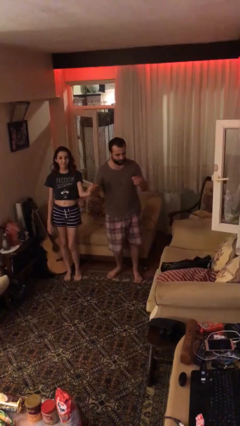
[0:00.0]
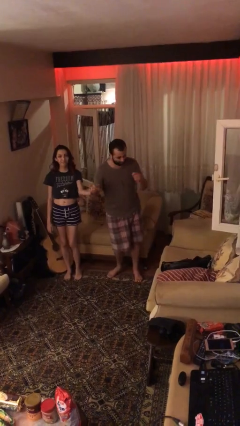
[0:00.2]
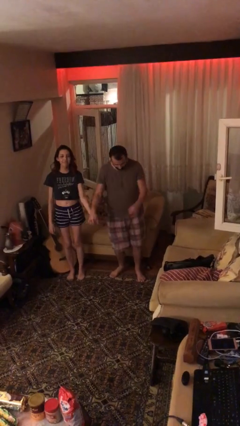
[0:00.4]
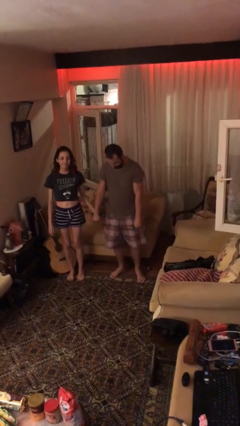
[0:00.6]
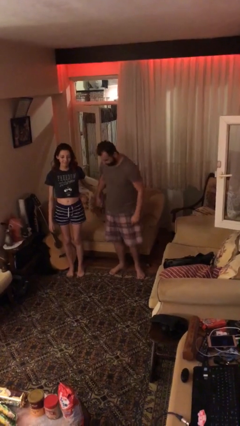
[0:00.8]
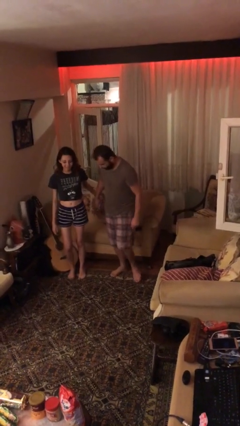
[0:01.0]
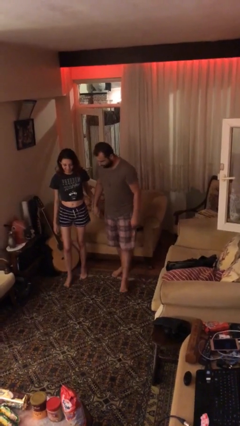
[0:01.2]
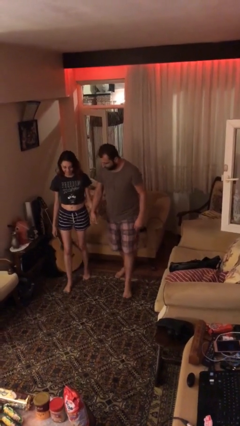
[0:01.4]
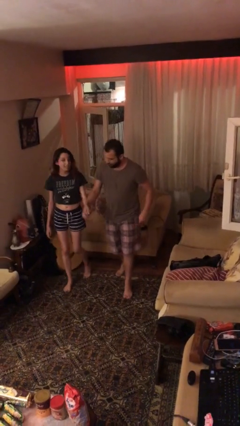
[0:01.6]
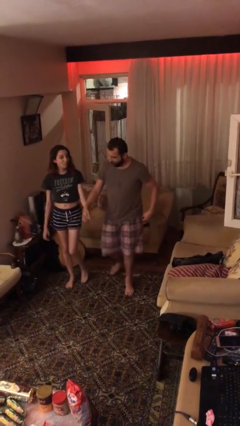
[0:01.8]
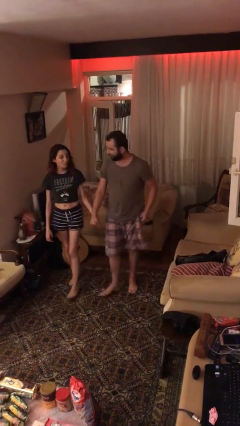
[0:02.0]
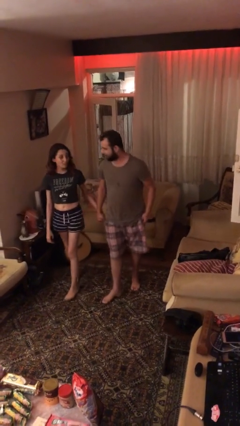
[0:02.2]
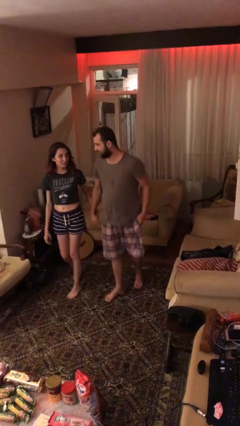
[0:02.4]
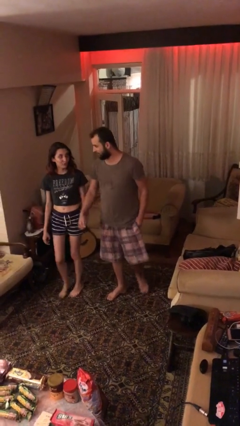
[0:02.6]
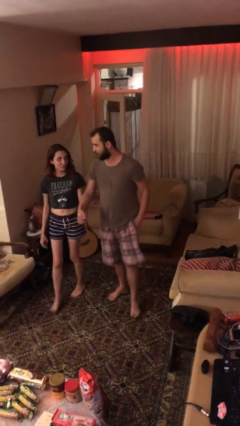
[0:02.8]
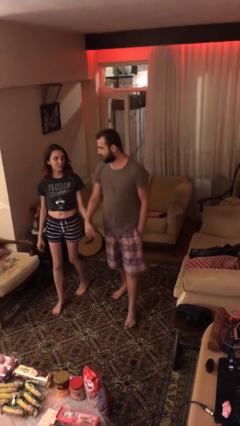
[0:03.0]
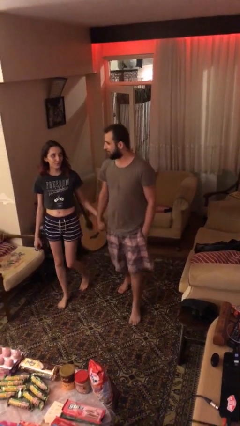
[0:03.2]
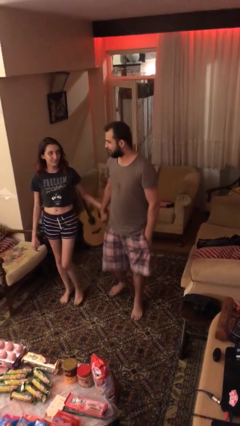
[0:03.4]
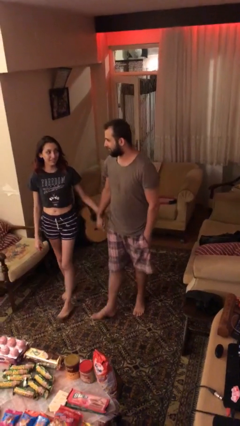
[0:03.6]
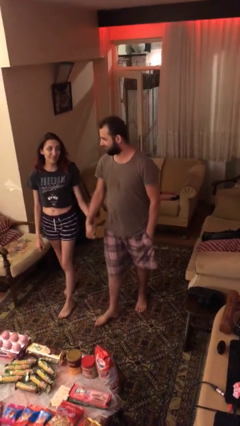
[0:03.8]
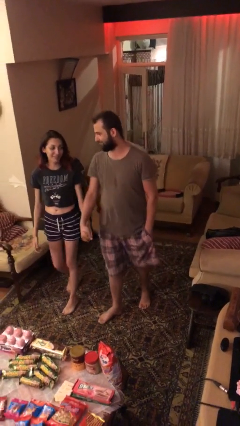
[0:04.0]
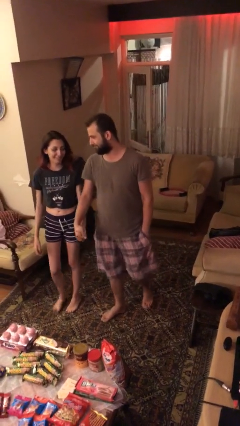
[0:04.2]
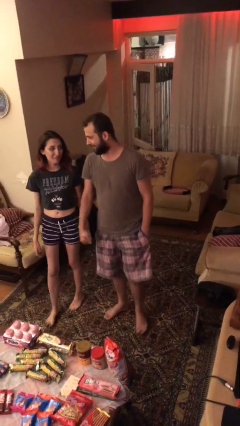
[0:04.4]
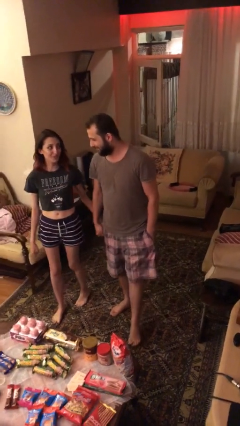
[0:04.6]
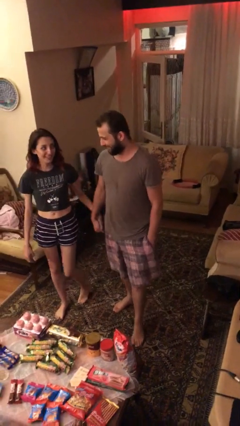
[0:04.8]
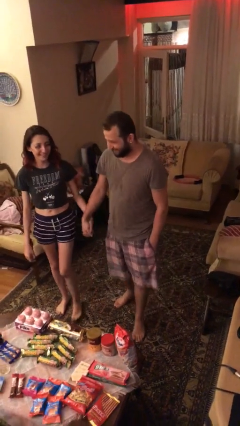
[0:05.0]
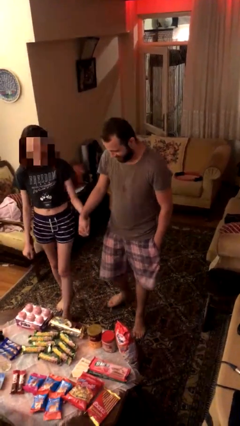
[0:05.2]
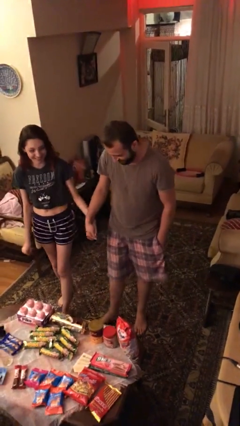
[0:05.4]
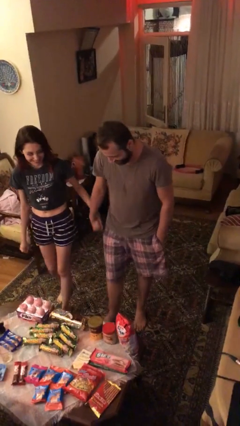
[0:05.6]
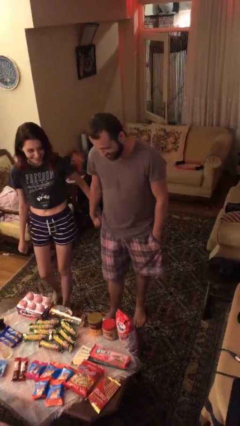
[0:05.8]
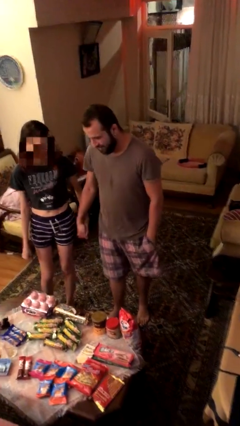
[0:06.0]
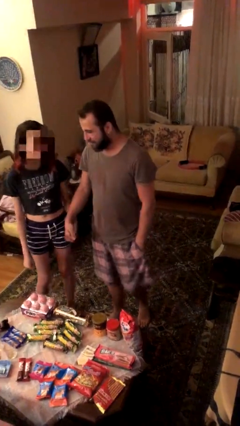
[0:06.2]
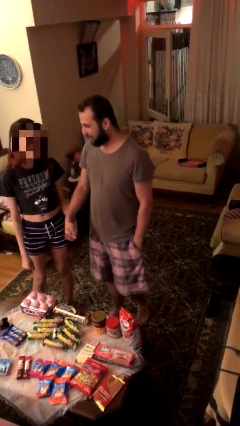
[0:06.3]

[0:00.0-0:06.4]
person holds hand

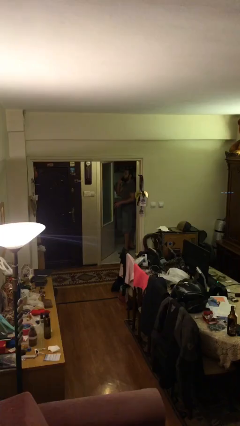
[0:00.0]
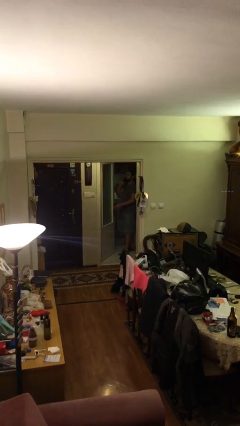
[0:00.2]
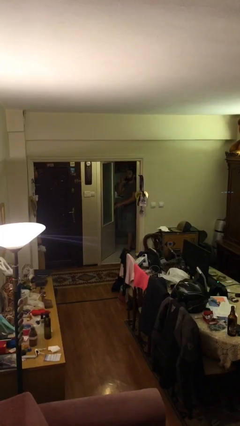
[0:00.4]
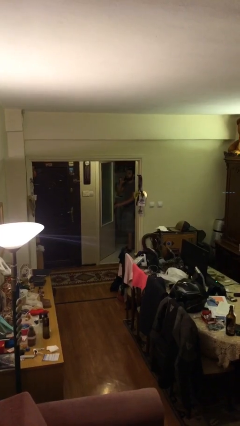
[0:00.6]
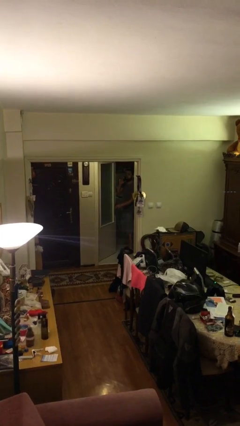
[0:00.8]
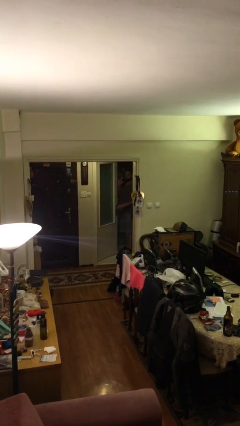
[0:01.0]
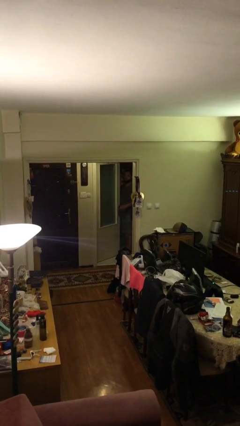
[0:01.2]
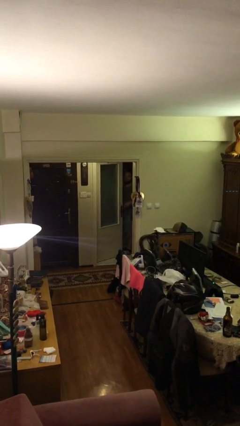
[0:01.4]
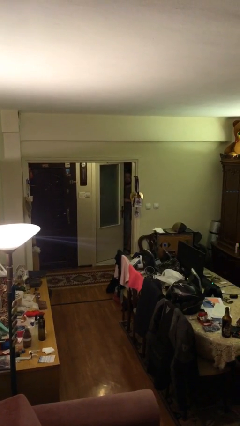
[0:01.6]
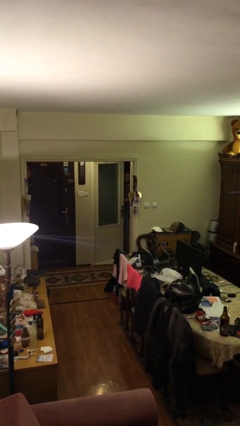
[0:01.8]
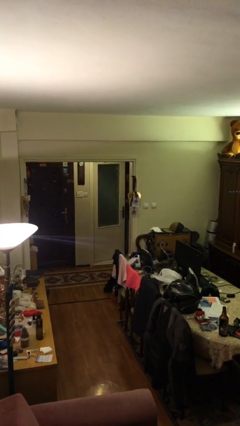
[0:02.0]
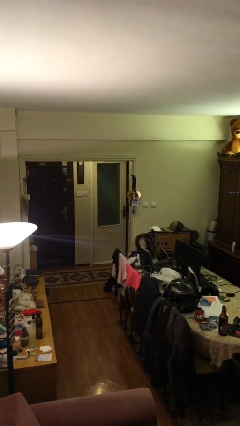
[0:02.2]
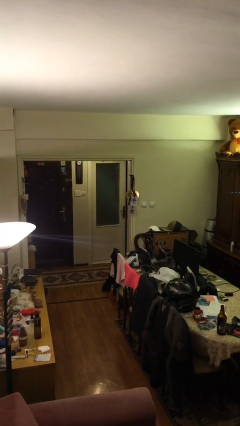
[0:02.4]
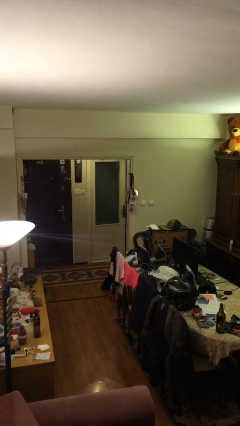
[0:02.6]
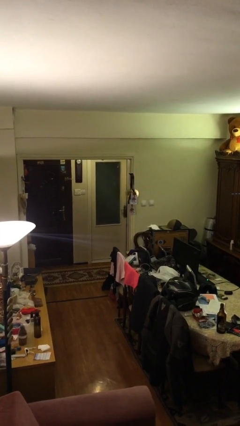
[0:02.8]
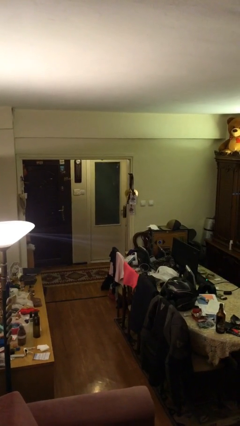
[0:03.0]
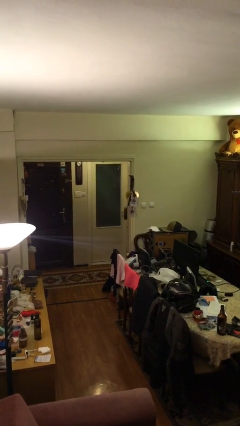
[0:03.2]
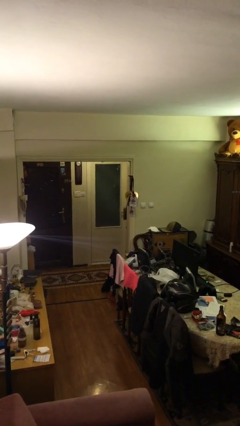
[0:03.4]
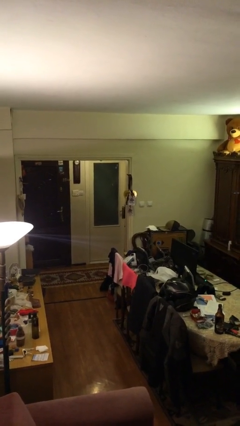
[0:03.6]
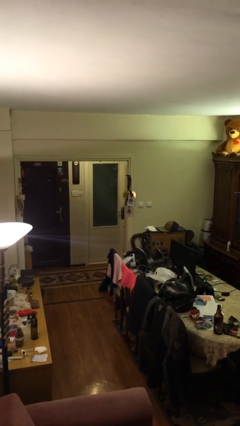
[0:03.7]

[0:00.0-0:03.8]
person closes facility door

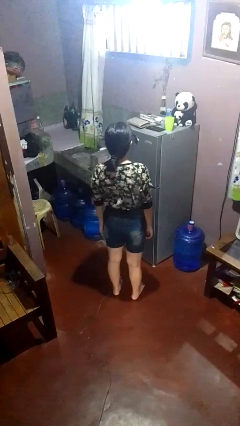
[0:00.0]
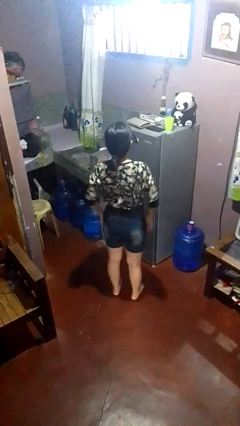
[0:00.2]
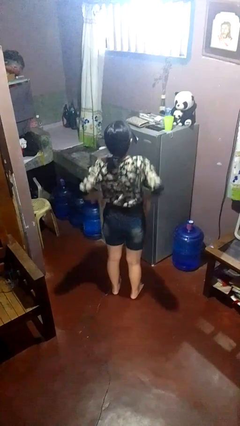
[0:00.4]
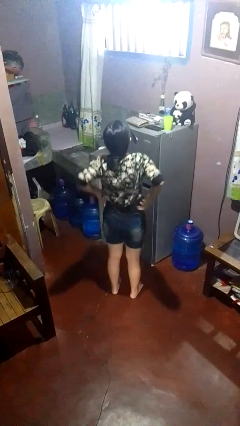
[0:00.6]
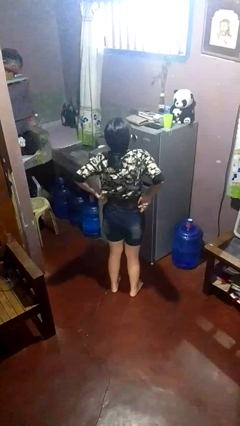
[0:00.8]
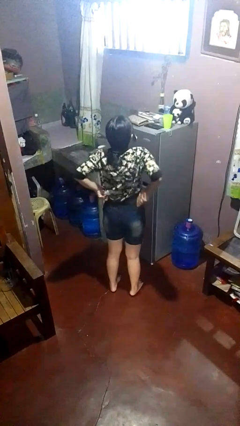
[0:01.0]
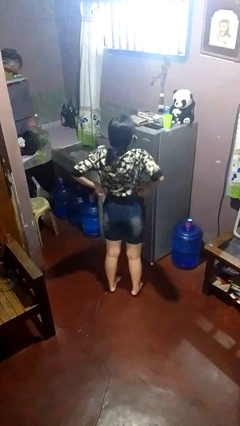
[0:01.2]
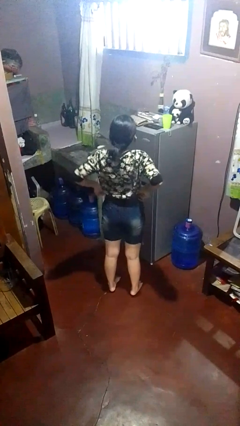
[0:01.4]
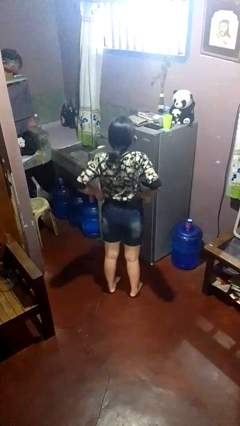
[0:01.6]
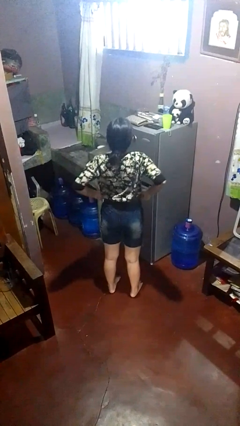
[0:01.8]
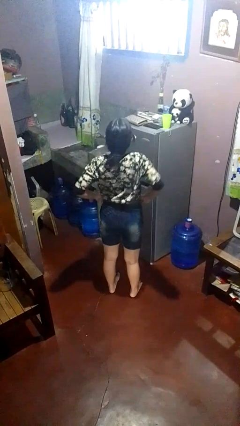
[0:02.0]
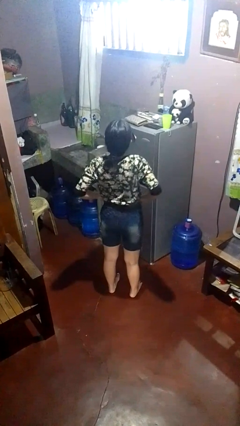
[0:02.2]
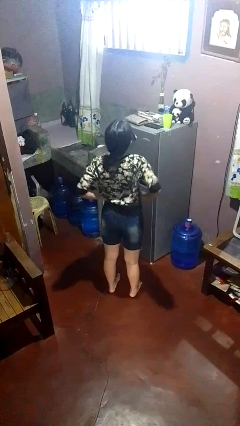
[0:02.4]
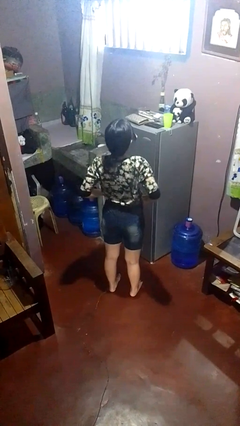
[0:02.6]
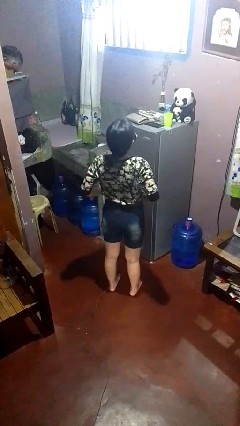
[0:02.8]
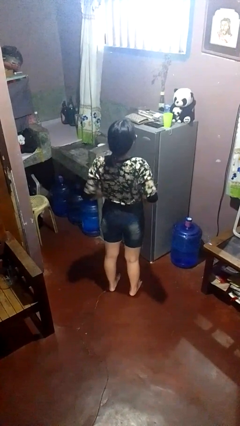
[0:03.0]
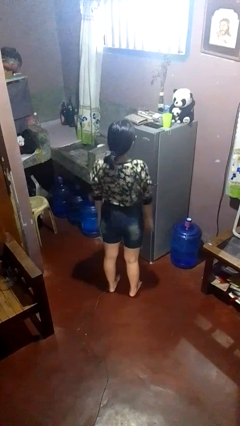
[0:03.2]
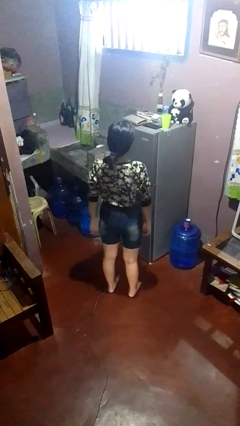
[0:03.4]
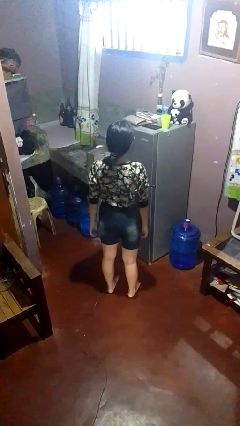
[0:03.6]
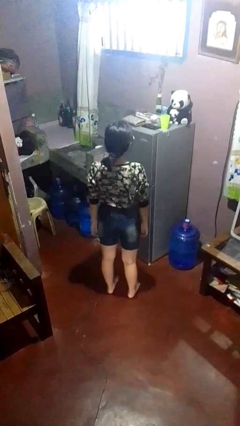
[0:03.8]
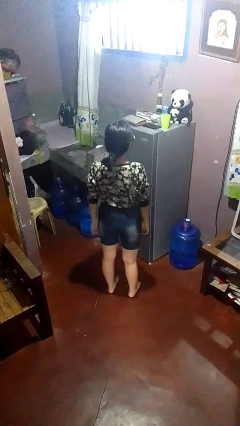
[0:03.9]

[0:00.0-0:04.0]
person hikes up pants

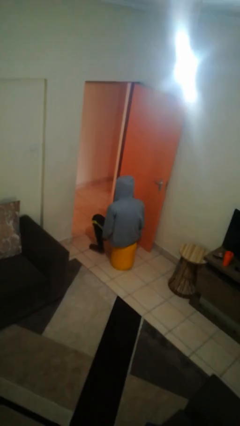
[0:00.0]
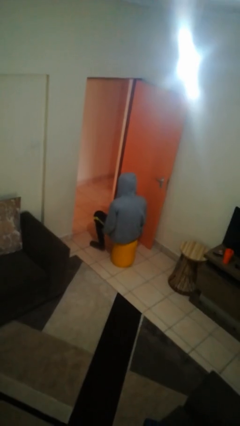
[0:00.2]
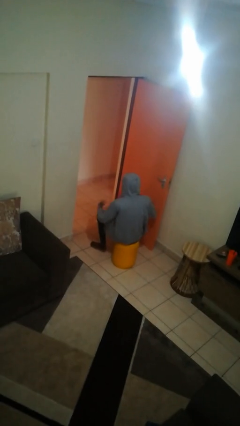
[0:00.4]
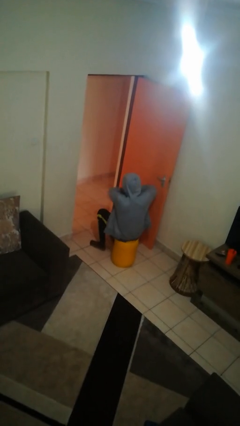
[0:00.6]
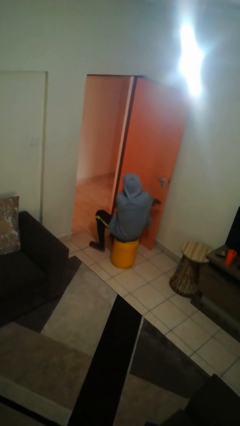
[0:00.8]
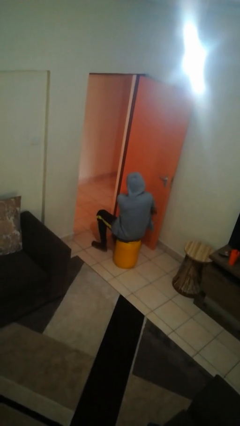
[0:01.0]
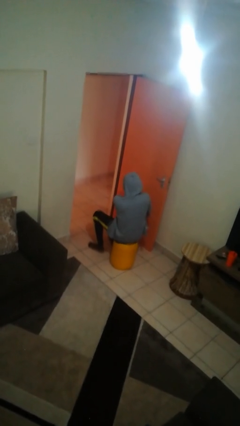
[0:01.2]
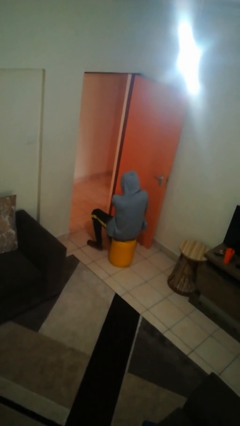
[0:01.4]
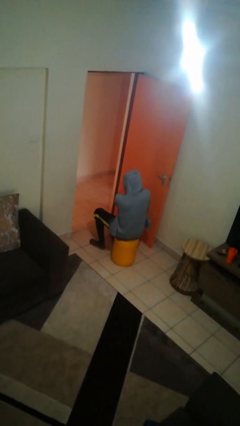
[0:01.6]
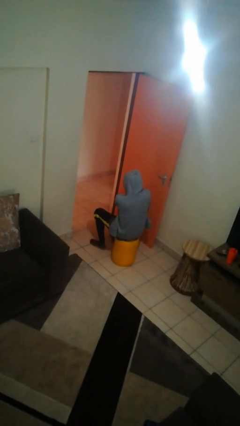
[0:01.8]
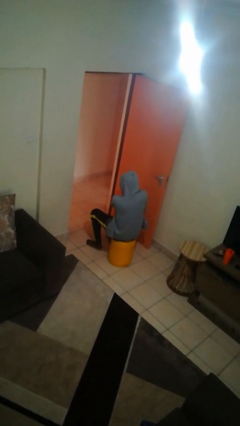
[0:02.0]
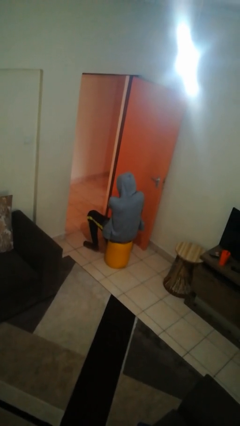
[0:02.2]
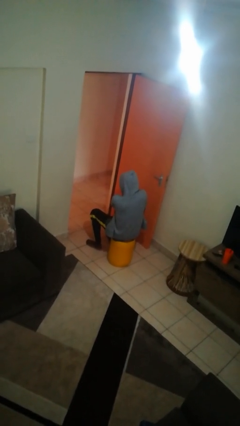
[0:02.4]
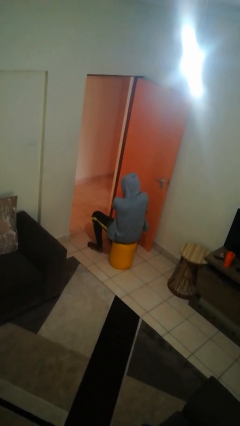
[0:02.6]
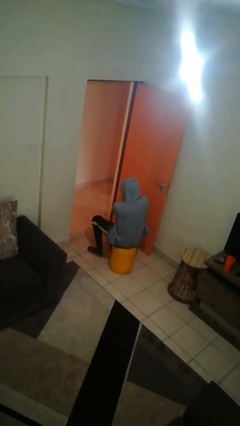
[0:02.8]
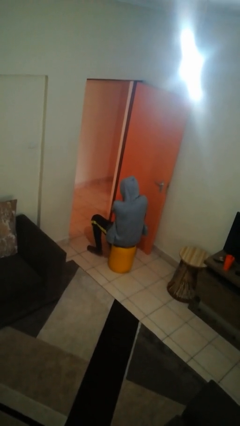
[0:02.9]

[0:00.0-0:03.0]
person crosses arms

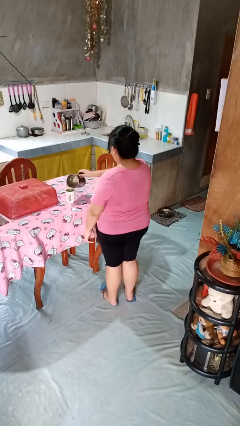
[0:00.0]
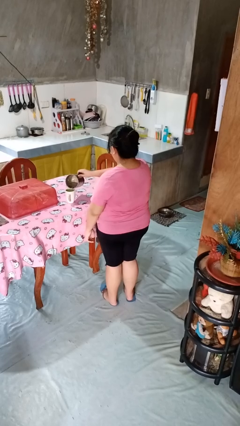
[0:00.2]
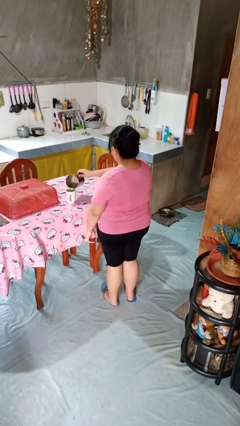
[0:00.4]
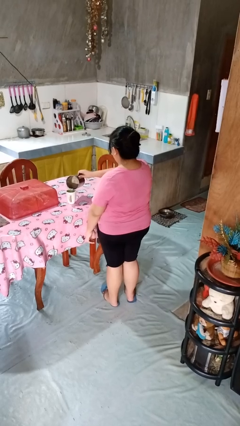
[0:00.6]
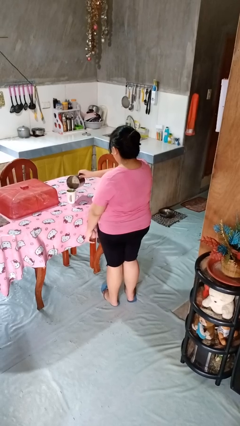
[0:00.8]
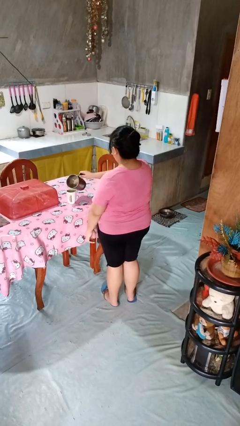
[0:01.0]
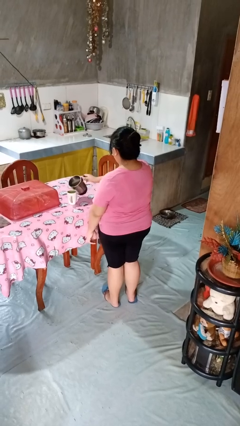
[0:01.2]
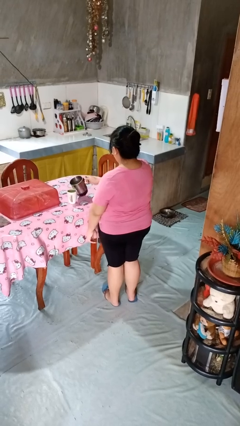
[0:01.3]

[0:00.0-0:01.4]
person pours coffee into mug
